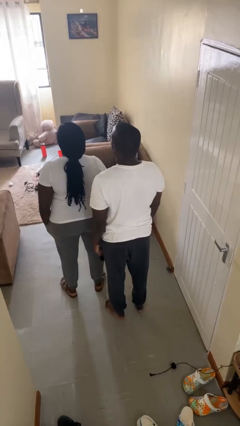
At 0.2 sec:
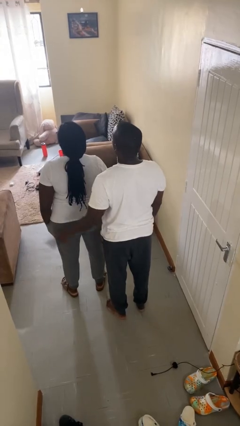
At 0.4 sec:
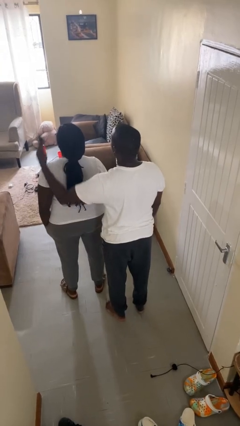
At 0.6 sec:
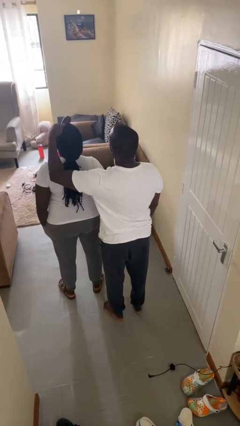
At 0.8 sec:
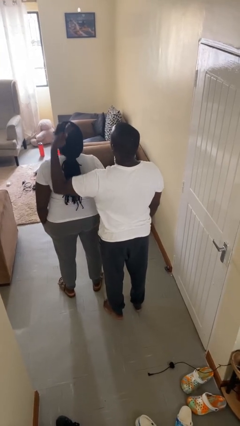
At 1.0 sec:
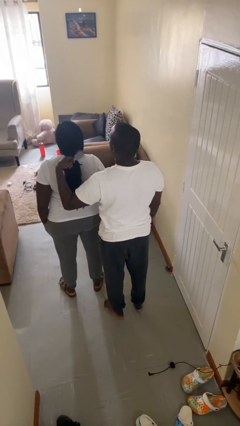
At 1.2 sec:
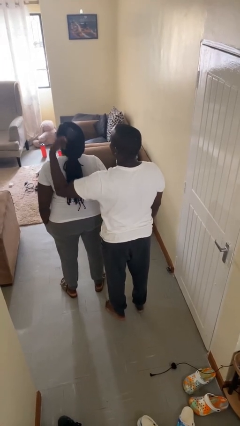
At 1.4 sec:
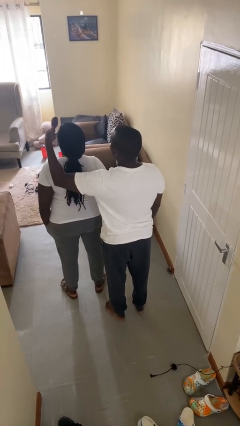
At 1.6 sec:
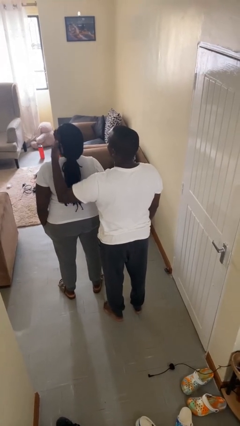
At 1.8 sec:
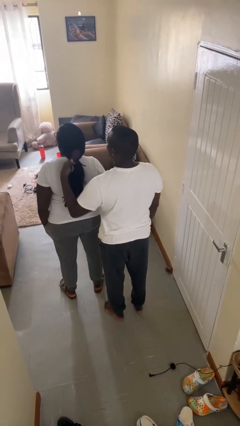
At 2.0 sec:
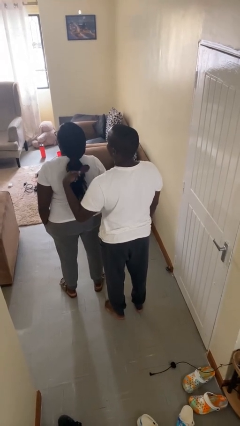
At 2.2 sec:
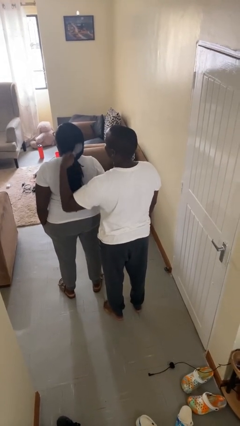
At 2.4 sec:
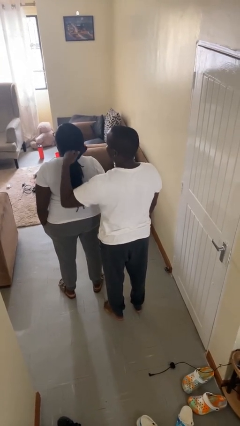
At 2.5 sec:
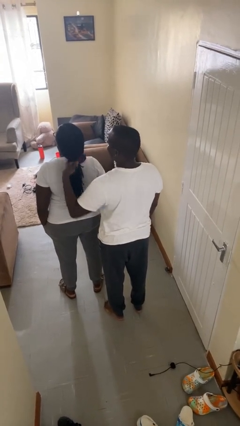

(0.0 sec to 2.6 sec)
person brushes hair of person

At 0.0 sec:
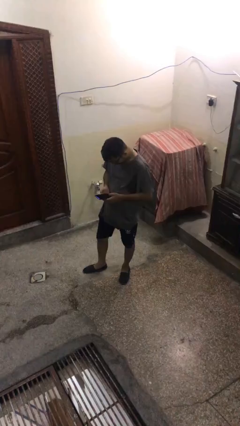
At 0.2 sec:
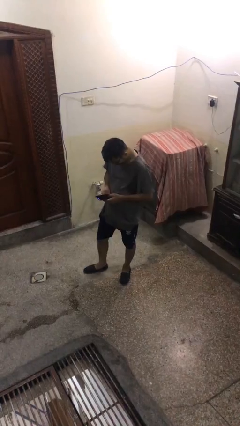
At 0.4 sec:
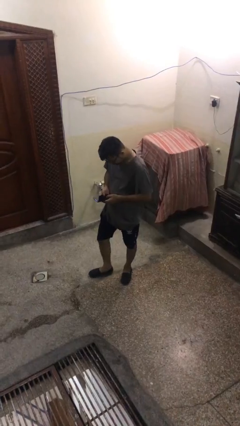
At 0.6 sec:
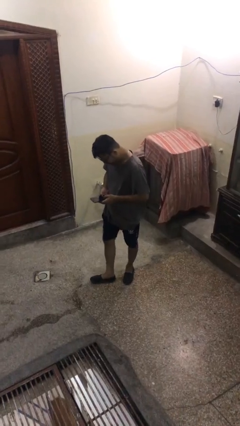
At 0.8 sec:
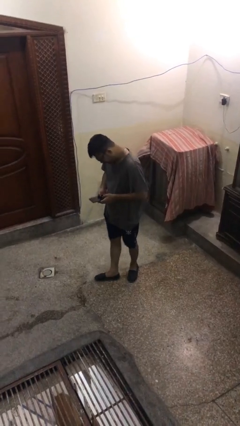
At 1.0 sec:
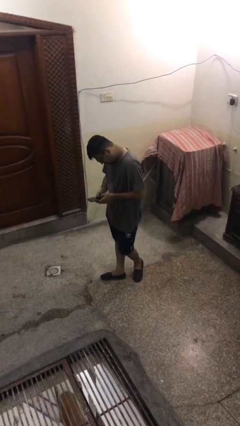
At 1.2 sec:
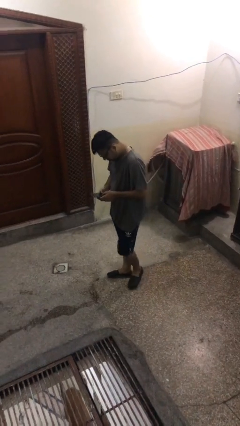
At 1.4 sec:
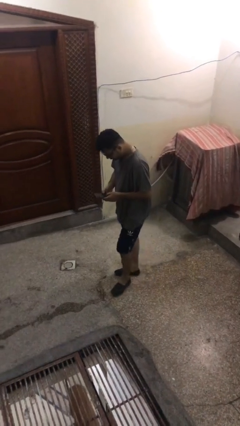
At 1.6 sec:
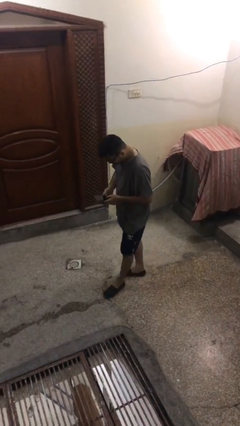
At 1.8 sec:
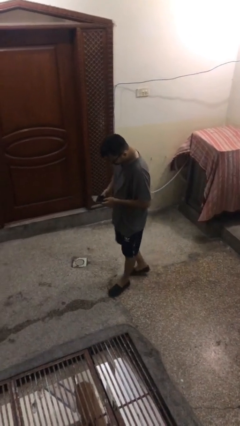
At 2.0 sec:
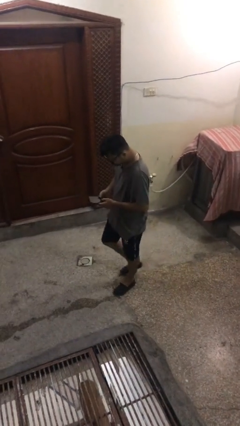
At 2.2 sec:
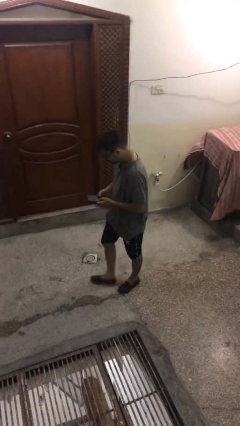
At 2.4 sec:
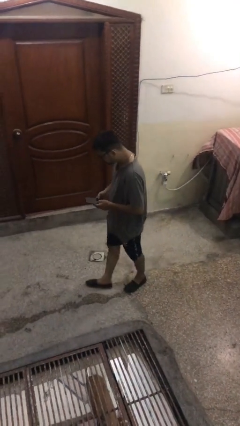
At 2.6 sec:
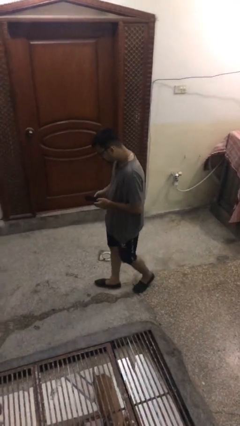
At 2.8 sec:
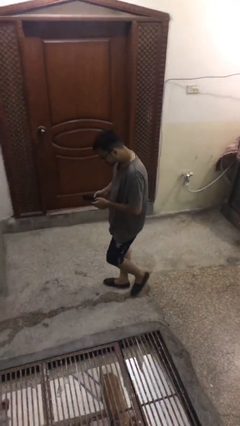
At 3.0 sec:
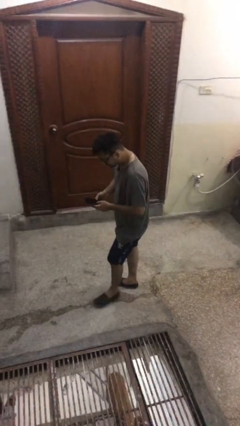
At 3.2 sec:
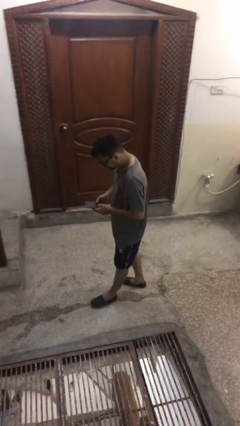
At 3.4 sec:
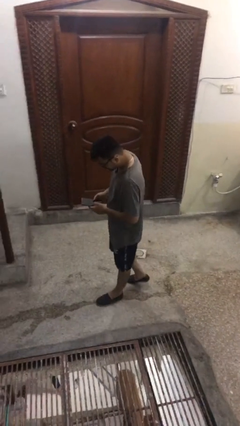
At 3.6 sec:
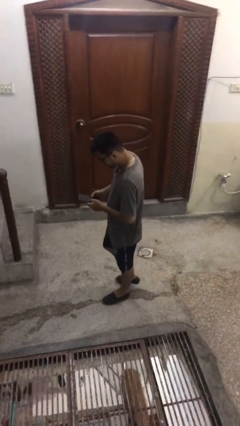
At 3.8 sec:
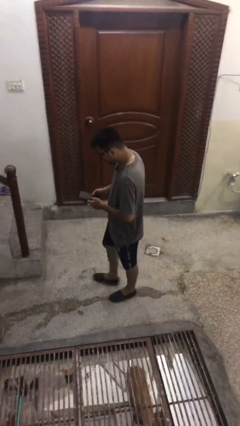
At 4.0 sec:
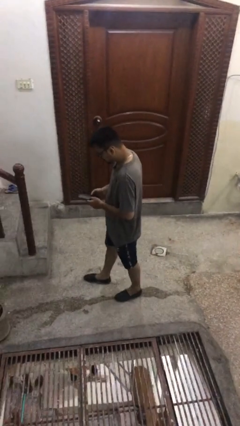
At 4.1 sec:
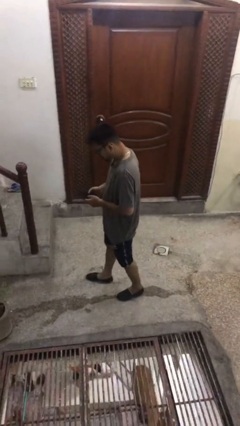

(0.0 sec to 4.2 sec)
person texts on phone

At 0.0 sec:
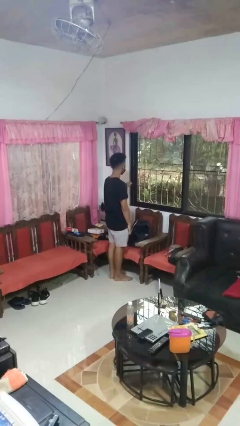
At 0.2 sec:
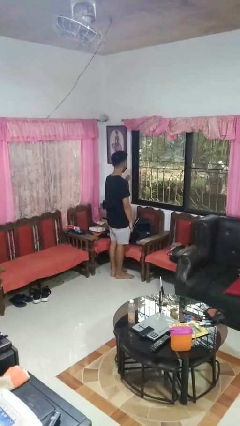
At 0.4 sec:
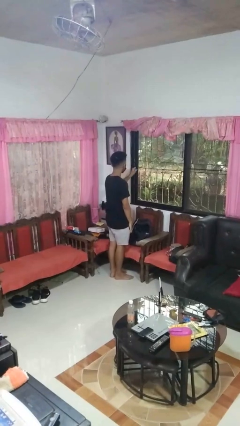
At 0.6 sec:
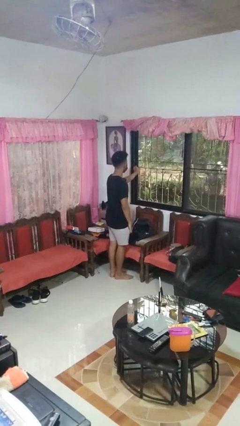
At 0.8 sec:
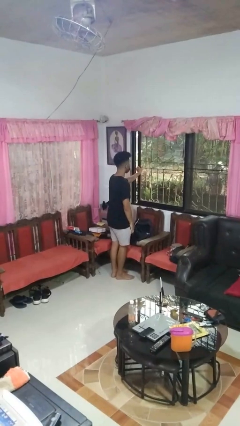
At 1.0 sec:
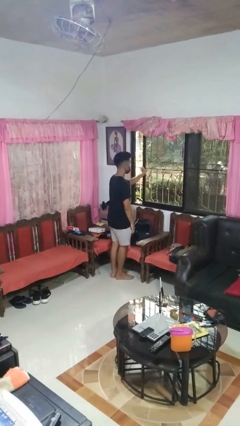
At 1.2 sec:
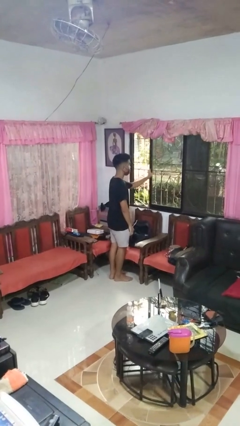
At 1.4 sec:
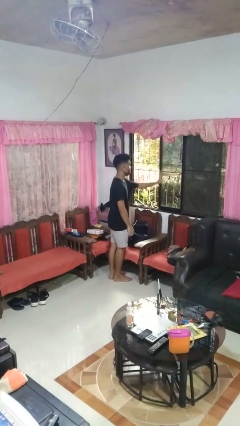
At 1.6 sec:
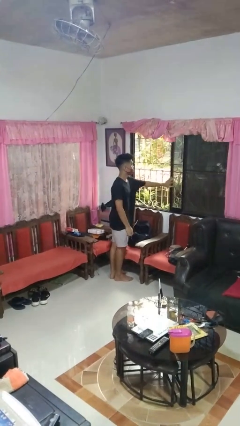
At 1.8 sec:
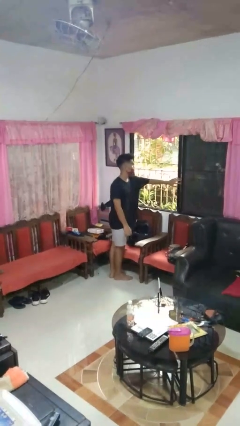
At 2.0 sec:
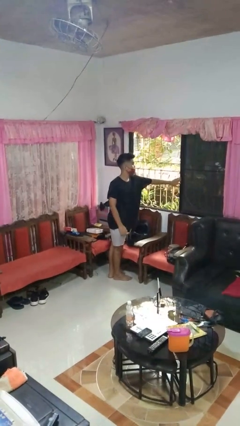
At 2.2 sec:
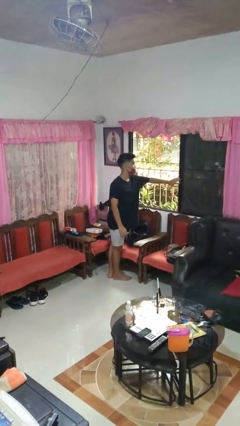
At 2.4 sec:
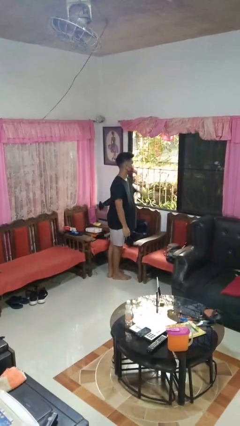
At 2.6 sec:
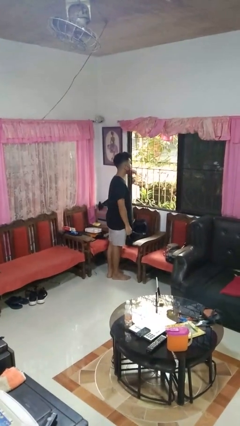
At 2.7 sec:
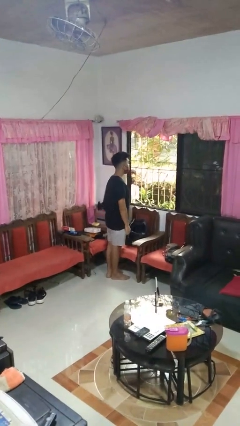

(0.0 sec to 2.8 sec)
person opens home window

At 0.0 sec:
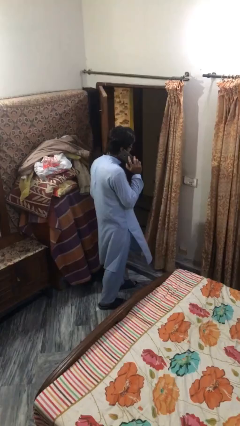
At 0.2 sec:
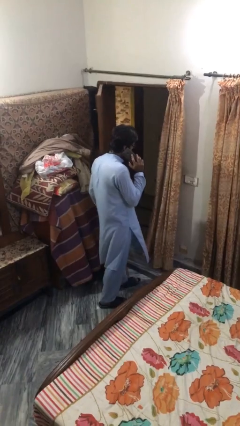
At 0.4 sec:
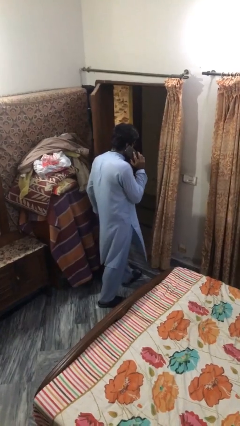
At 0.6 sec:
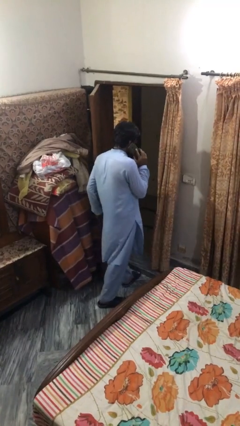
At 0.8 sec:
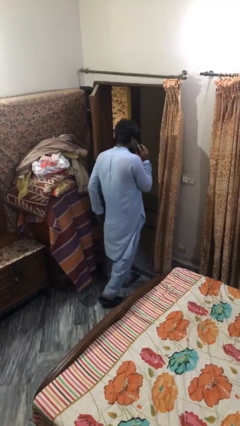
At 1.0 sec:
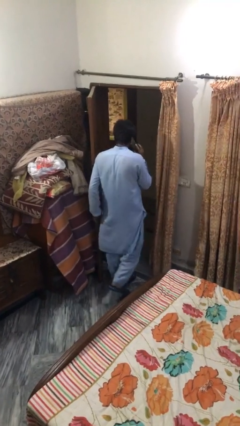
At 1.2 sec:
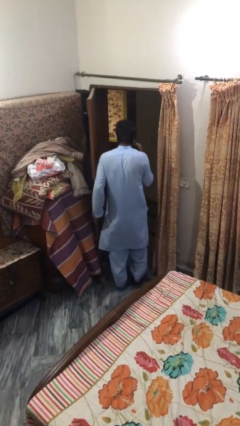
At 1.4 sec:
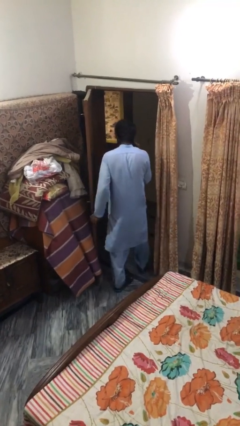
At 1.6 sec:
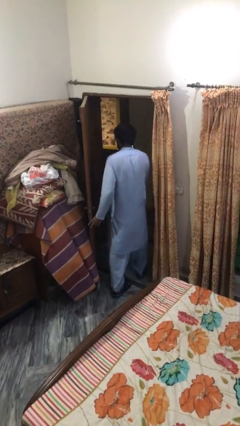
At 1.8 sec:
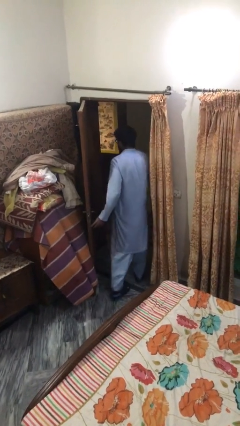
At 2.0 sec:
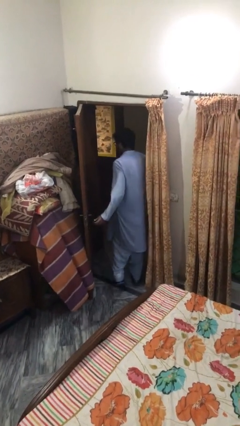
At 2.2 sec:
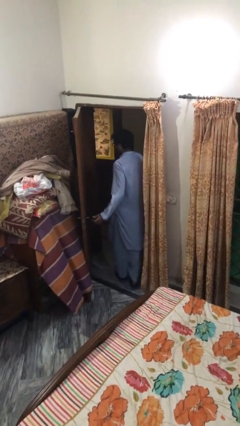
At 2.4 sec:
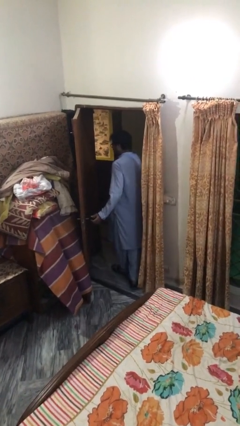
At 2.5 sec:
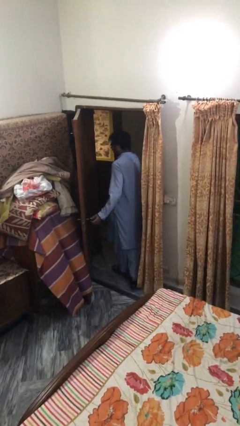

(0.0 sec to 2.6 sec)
person exits scene through structure

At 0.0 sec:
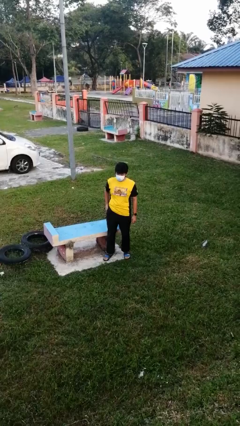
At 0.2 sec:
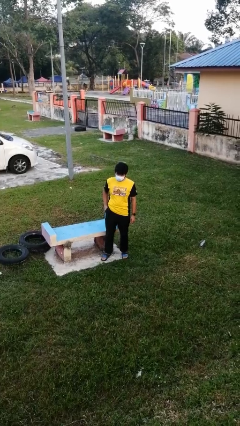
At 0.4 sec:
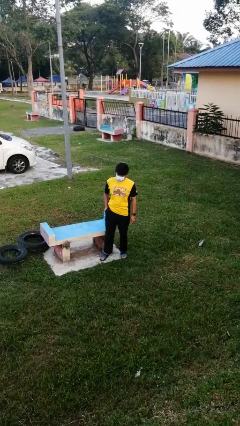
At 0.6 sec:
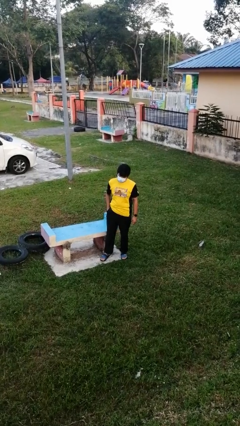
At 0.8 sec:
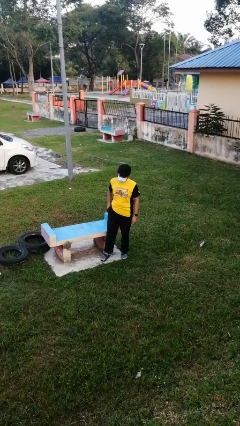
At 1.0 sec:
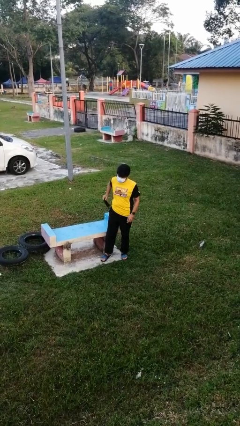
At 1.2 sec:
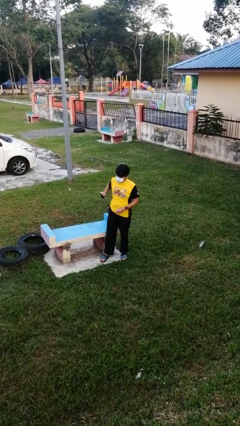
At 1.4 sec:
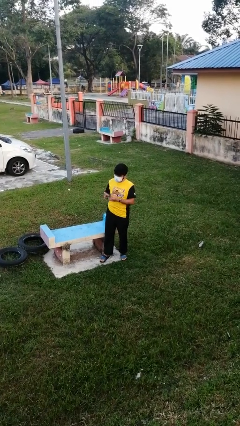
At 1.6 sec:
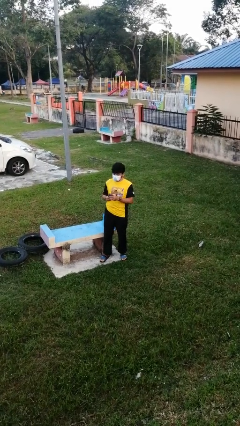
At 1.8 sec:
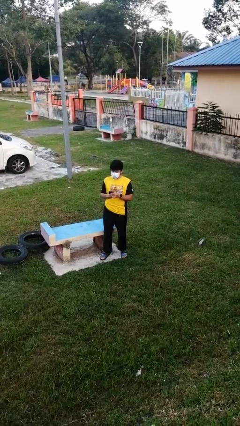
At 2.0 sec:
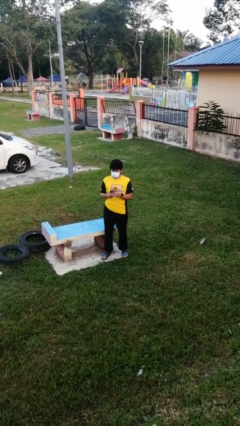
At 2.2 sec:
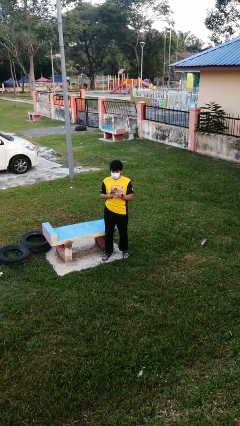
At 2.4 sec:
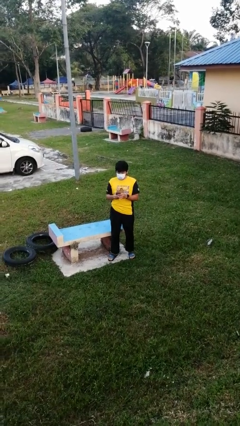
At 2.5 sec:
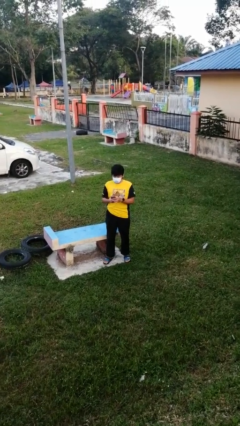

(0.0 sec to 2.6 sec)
person takes phone from pocket

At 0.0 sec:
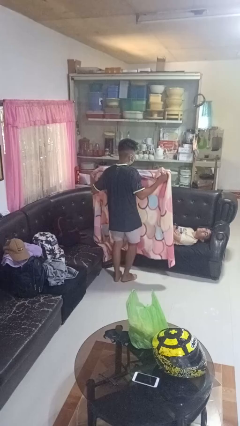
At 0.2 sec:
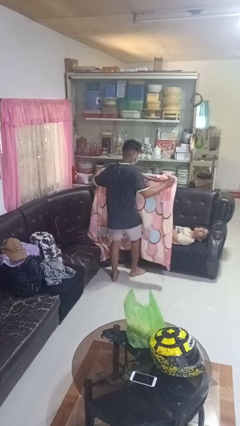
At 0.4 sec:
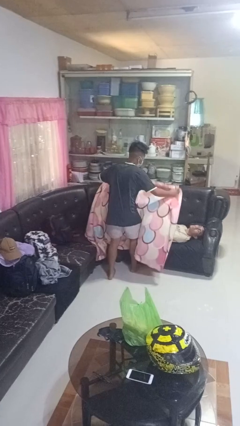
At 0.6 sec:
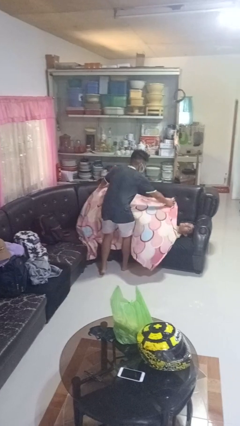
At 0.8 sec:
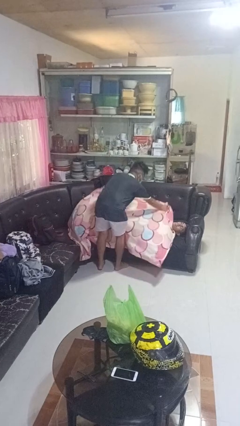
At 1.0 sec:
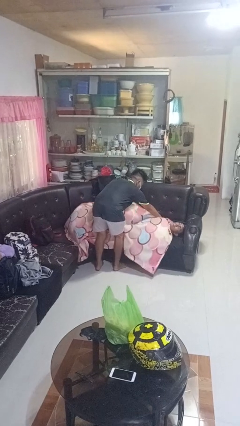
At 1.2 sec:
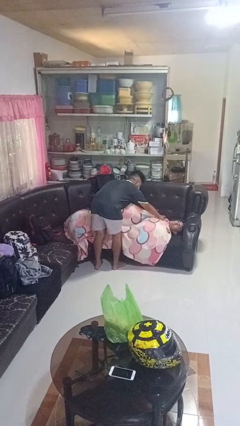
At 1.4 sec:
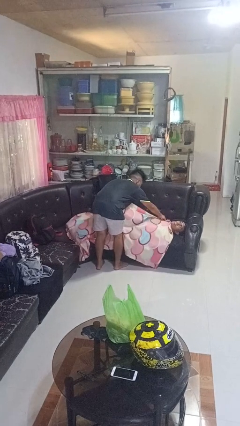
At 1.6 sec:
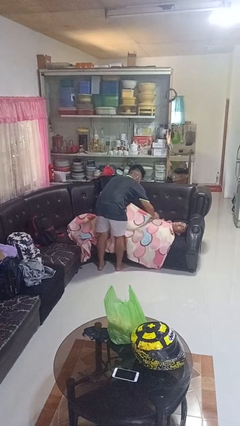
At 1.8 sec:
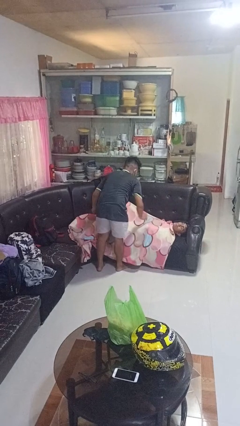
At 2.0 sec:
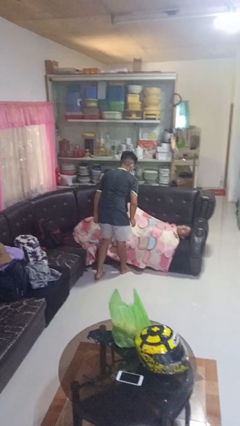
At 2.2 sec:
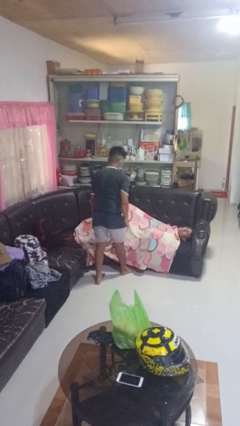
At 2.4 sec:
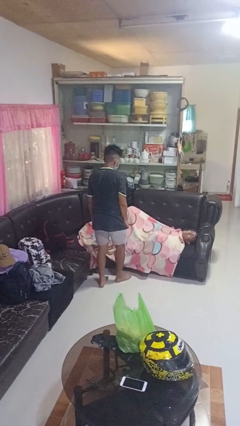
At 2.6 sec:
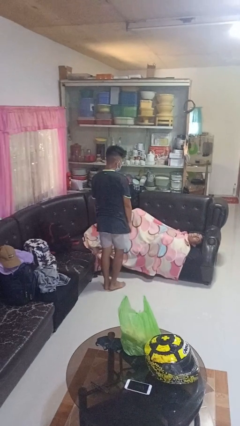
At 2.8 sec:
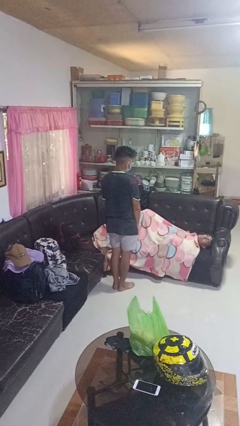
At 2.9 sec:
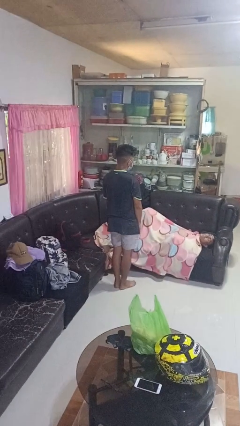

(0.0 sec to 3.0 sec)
person covers friend with blanket
